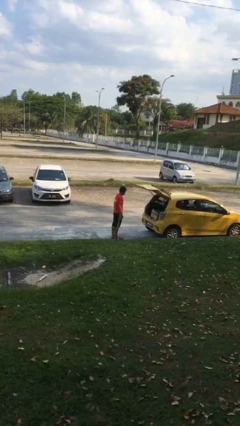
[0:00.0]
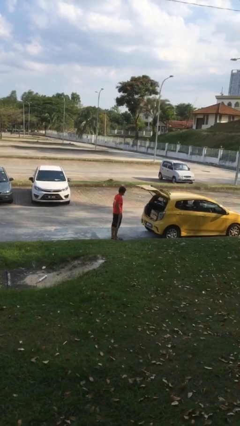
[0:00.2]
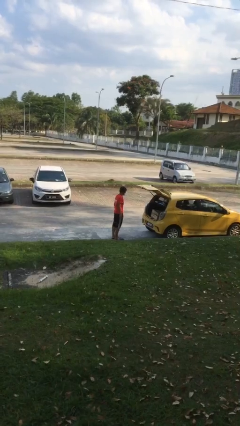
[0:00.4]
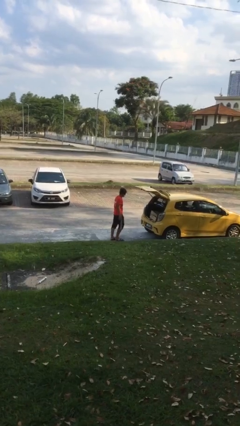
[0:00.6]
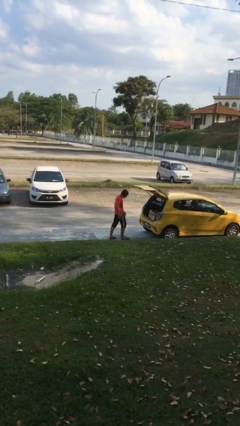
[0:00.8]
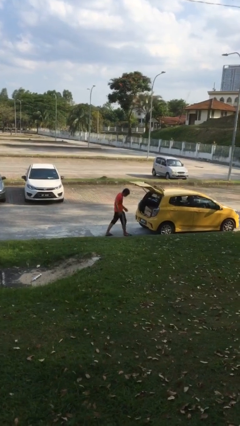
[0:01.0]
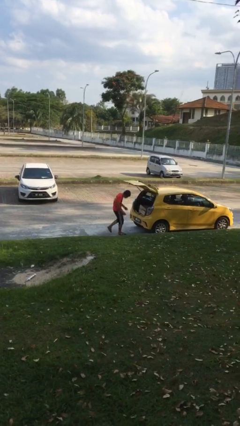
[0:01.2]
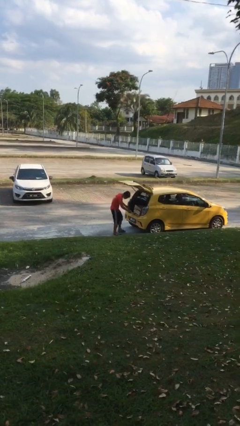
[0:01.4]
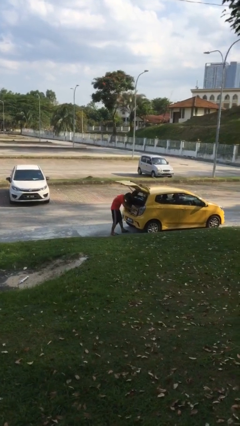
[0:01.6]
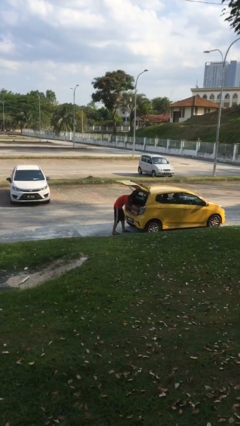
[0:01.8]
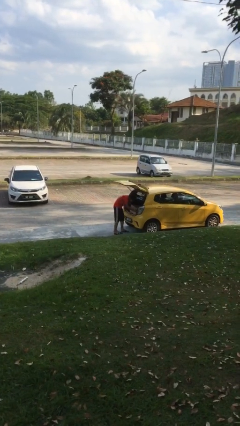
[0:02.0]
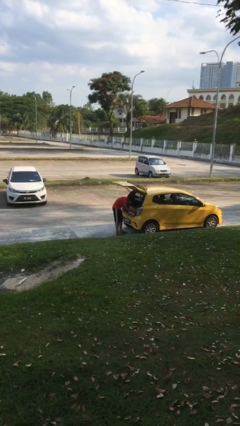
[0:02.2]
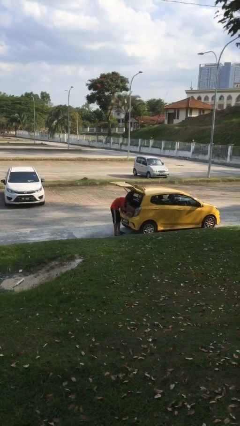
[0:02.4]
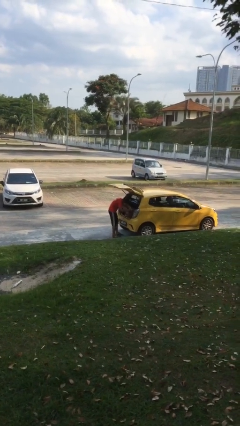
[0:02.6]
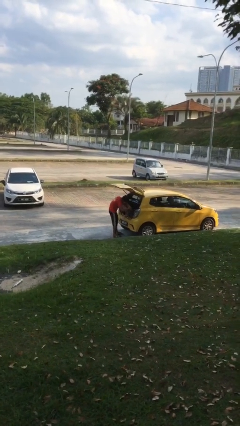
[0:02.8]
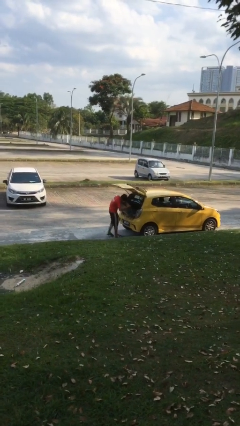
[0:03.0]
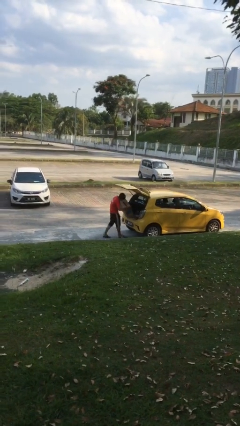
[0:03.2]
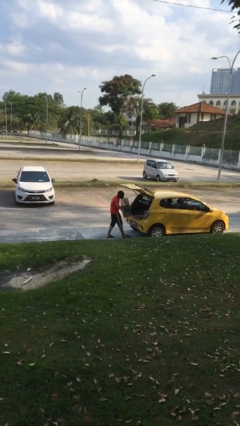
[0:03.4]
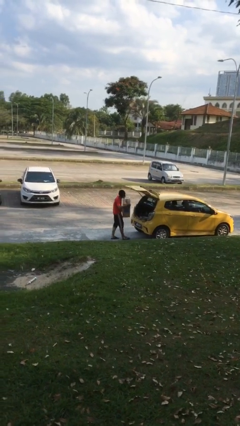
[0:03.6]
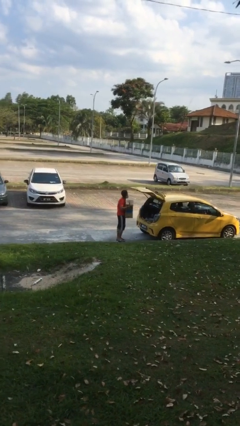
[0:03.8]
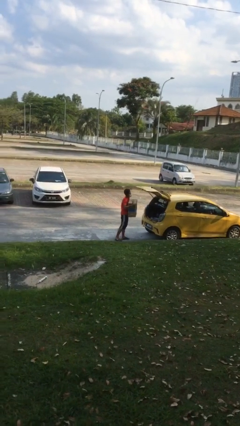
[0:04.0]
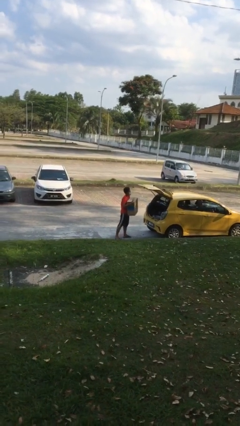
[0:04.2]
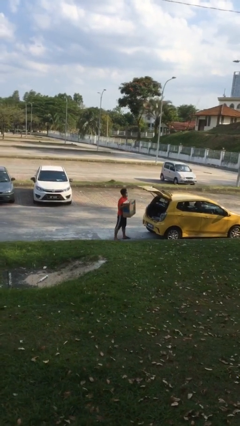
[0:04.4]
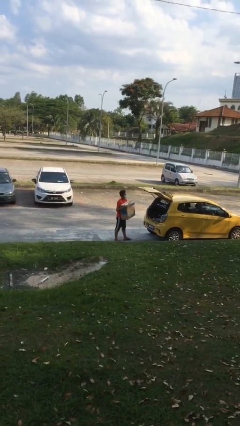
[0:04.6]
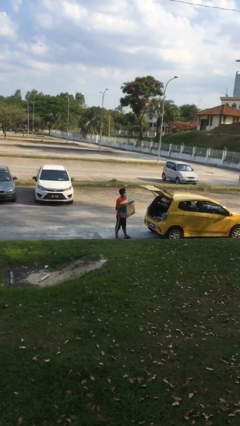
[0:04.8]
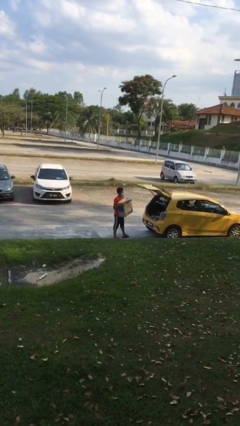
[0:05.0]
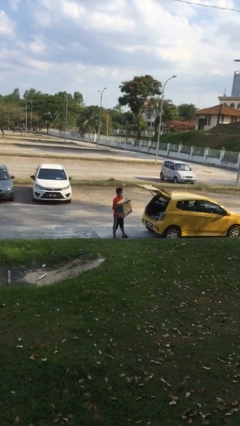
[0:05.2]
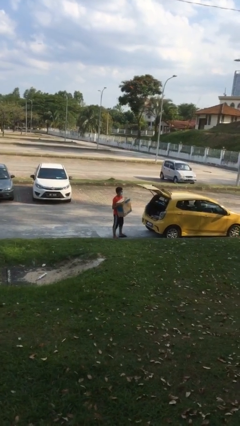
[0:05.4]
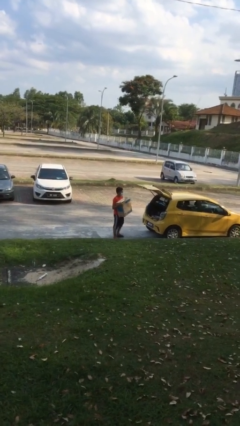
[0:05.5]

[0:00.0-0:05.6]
person unloads car

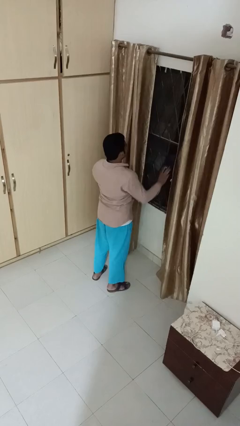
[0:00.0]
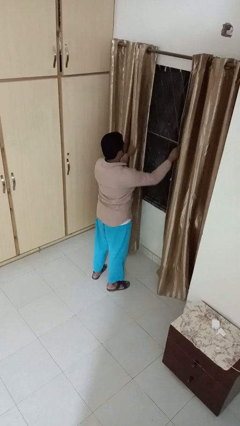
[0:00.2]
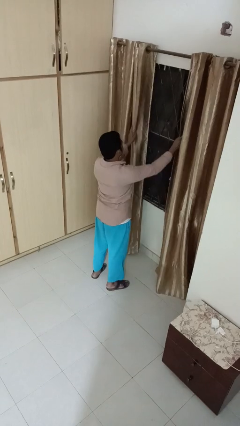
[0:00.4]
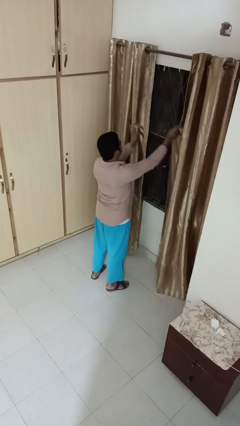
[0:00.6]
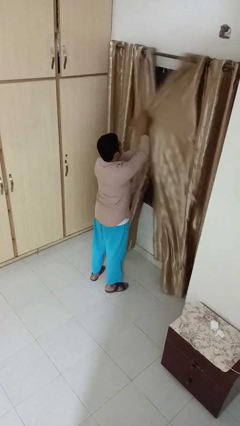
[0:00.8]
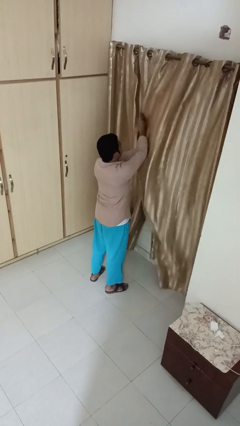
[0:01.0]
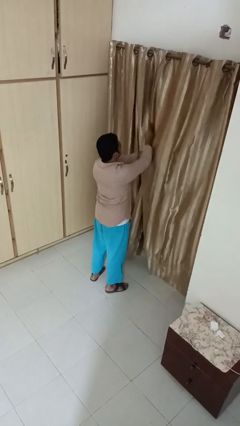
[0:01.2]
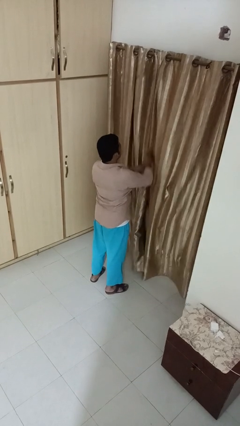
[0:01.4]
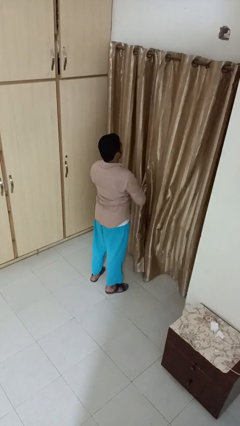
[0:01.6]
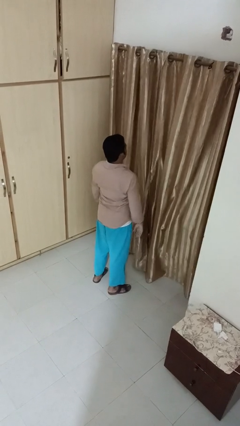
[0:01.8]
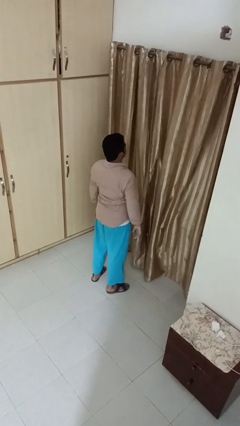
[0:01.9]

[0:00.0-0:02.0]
person closes curtains

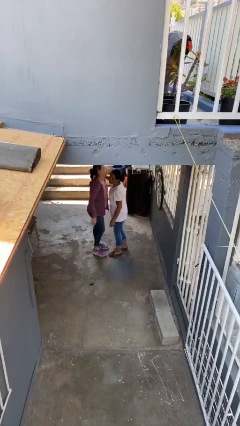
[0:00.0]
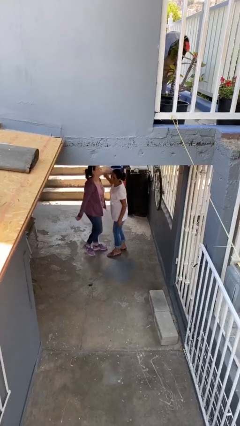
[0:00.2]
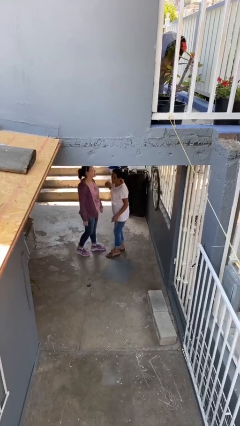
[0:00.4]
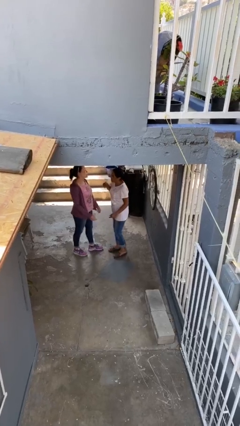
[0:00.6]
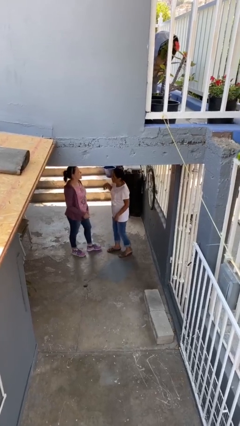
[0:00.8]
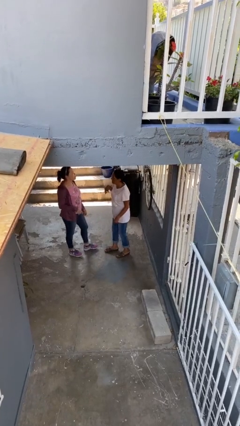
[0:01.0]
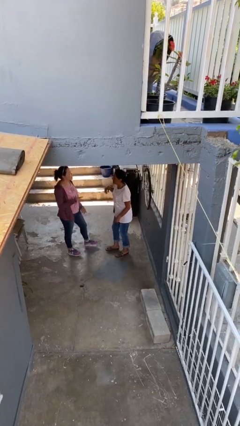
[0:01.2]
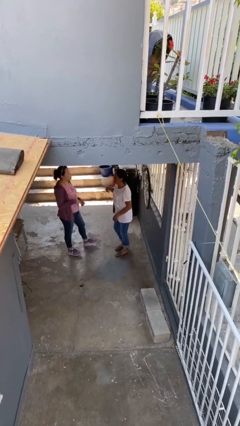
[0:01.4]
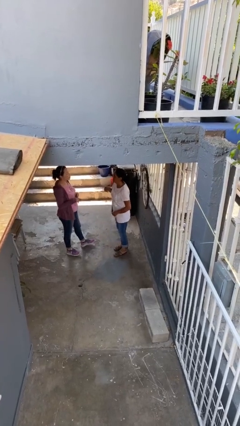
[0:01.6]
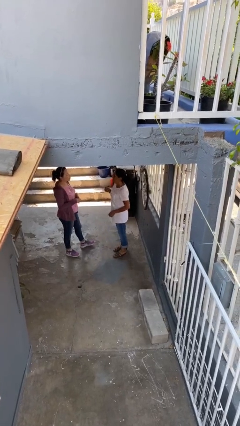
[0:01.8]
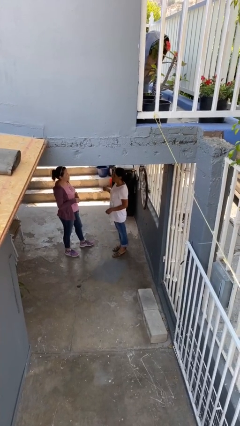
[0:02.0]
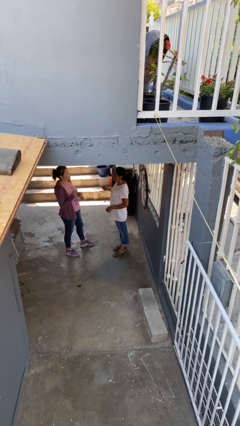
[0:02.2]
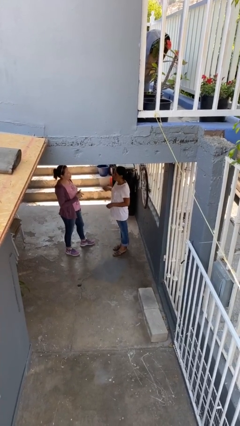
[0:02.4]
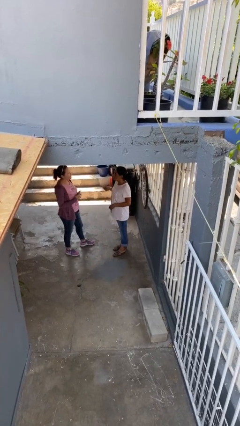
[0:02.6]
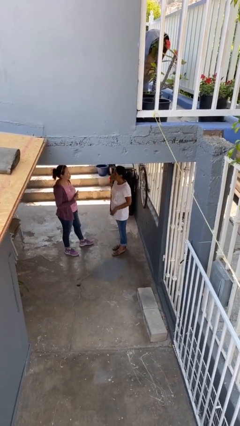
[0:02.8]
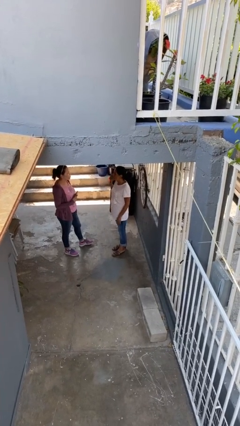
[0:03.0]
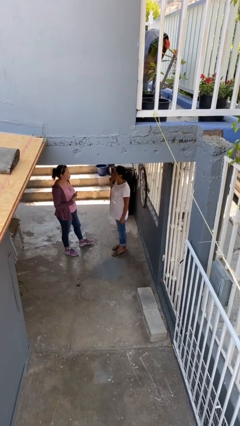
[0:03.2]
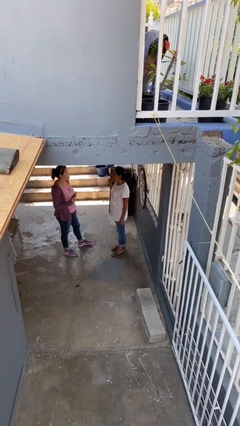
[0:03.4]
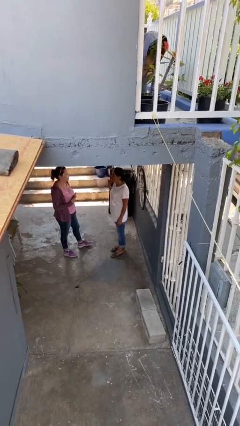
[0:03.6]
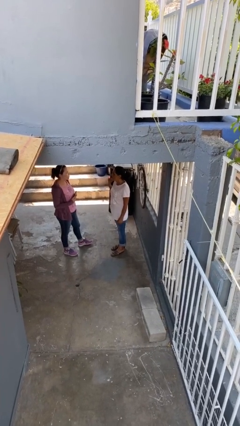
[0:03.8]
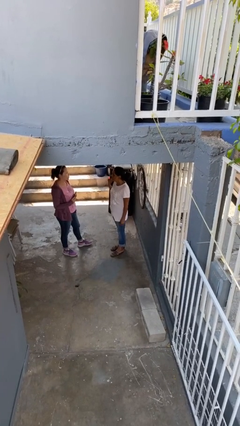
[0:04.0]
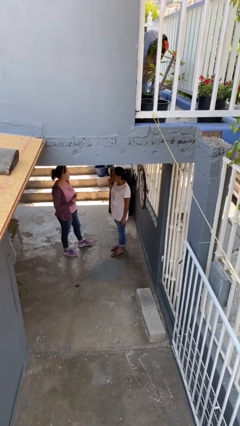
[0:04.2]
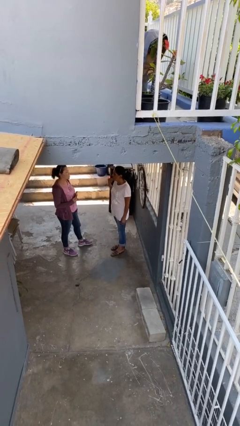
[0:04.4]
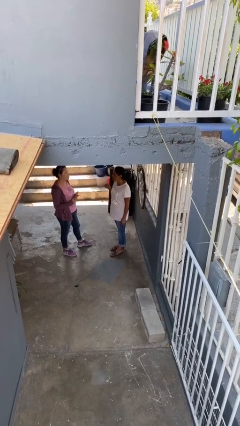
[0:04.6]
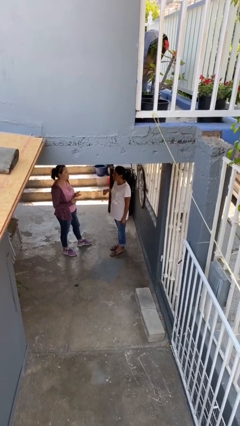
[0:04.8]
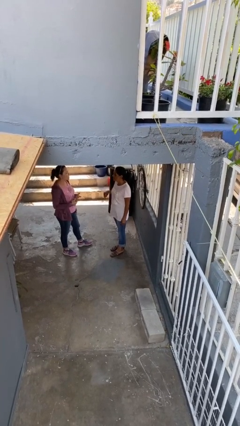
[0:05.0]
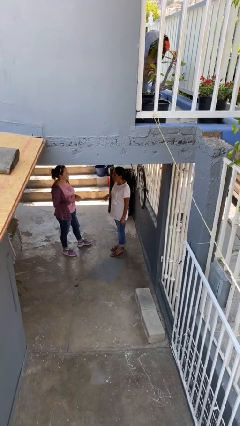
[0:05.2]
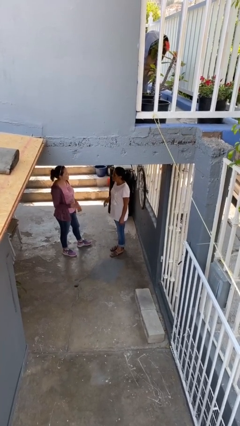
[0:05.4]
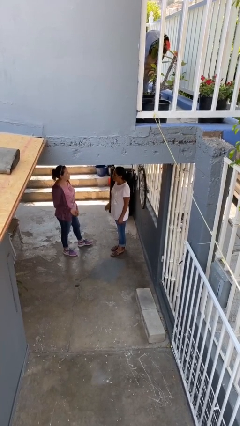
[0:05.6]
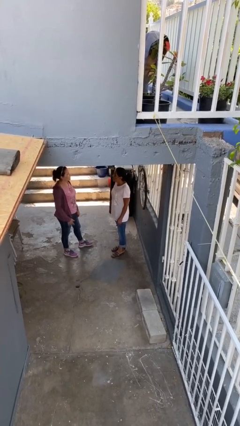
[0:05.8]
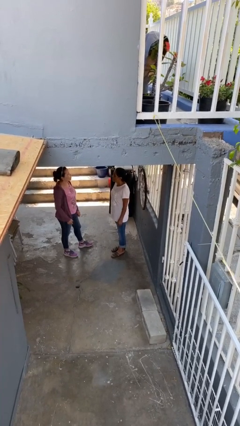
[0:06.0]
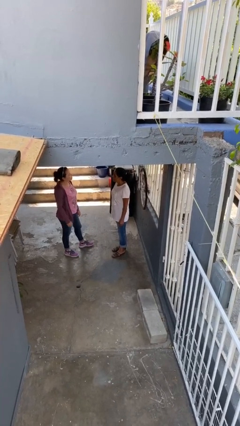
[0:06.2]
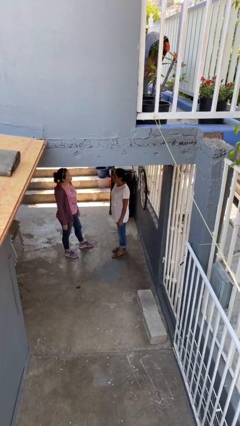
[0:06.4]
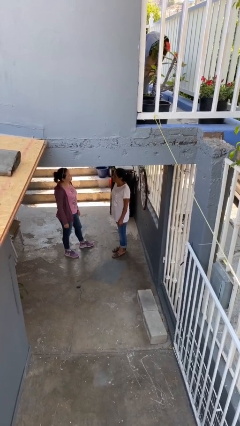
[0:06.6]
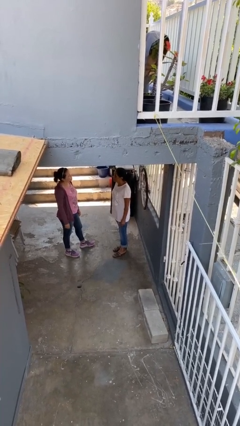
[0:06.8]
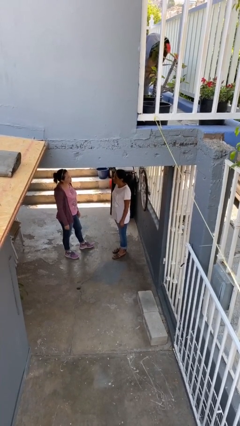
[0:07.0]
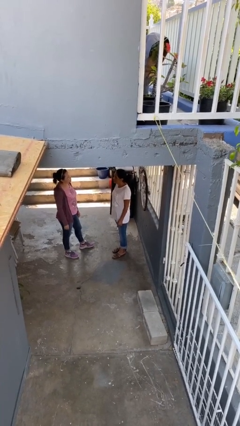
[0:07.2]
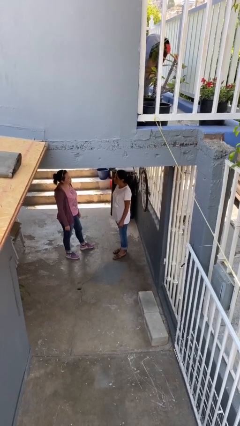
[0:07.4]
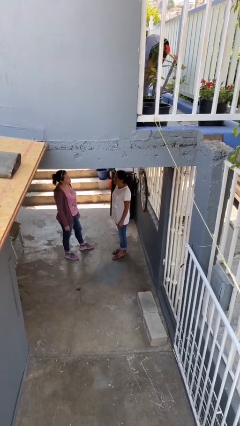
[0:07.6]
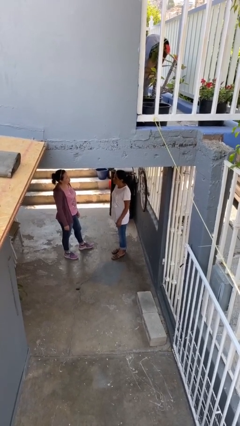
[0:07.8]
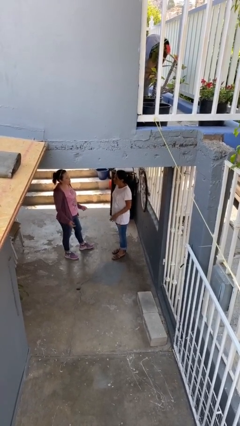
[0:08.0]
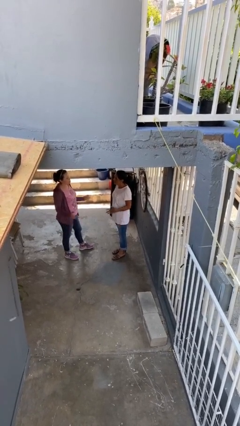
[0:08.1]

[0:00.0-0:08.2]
person talks to person

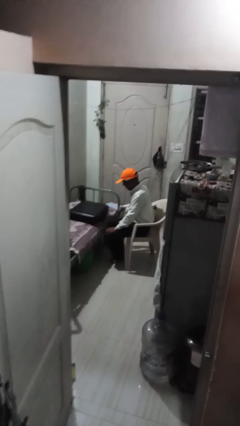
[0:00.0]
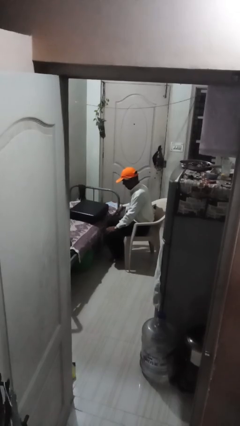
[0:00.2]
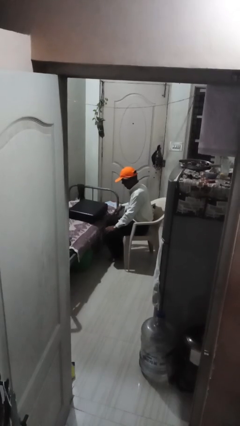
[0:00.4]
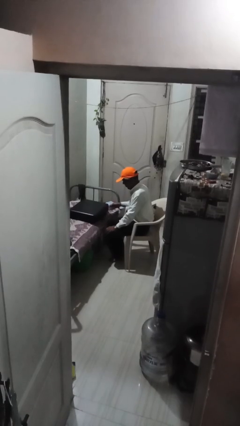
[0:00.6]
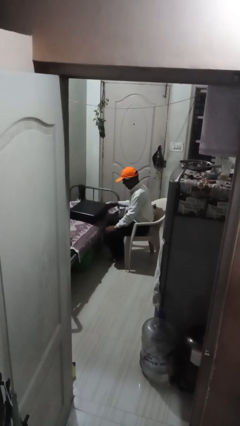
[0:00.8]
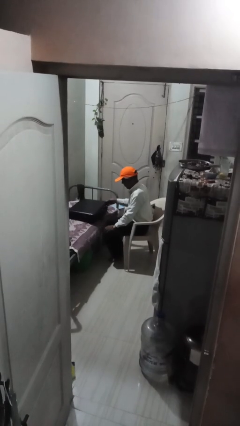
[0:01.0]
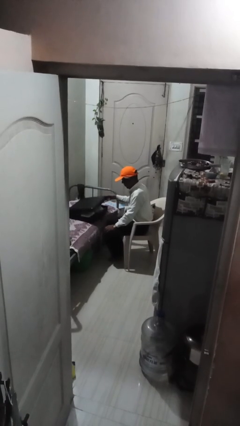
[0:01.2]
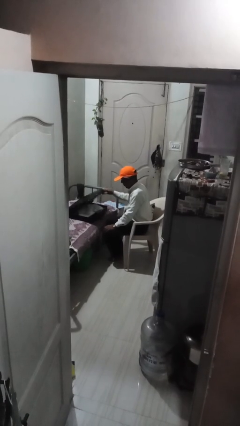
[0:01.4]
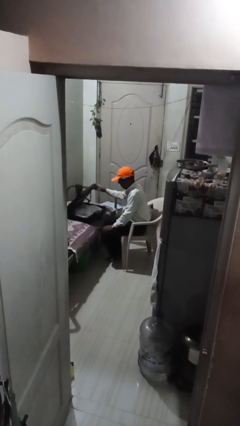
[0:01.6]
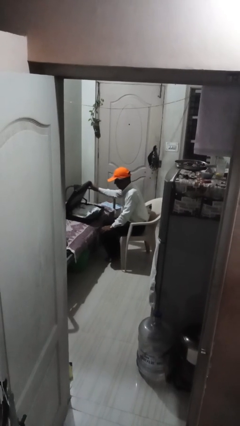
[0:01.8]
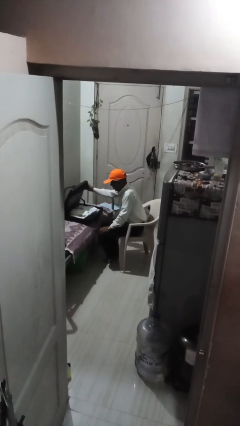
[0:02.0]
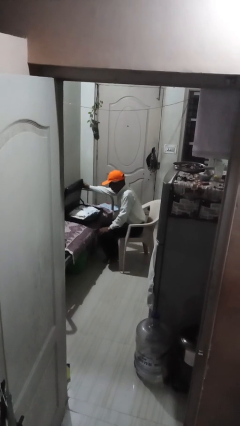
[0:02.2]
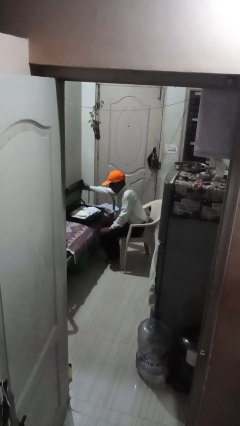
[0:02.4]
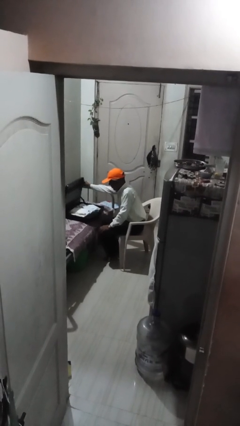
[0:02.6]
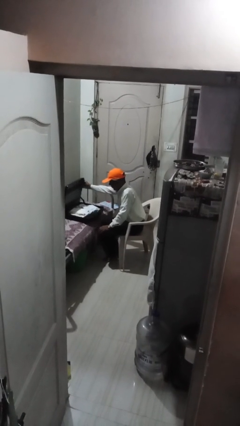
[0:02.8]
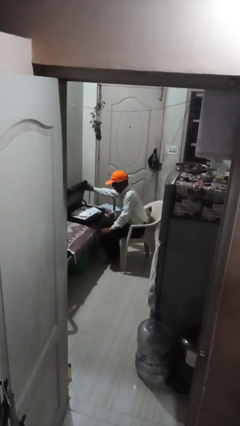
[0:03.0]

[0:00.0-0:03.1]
person opens suitcase
